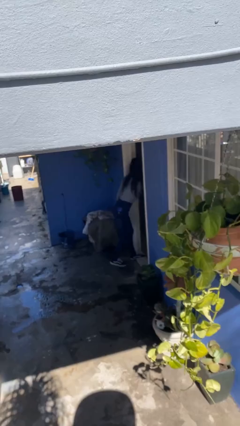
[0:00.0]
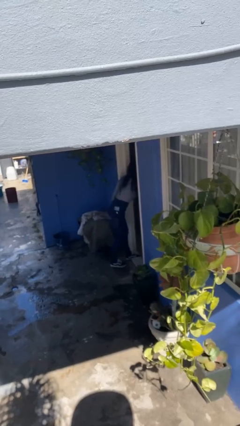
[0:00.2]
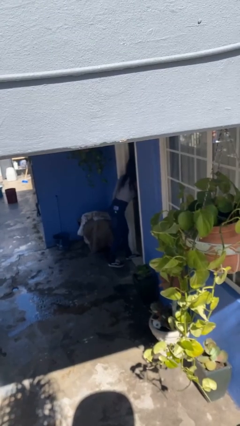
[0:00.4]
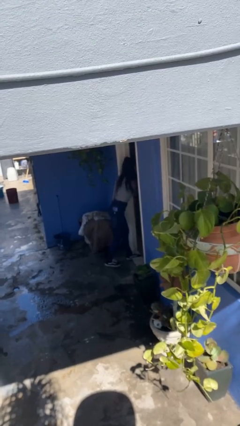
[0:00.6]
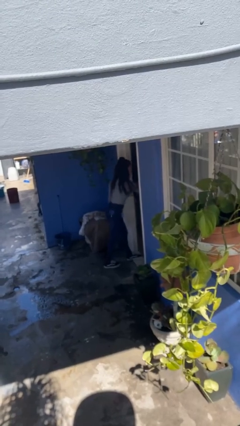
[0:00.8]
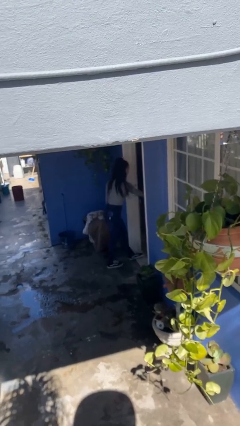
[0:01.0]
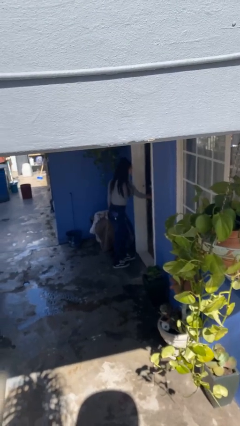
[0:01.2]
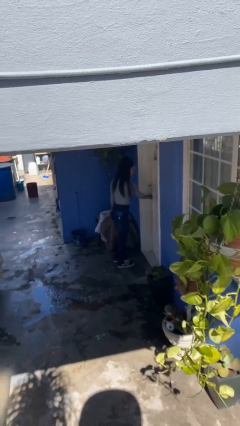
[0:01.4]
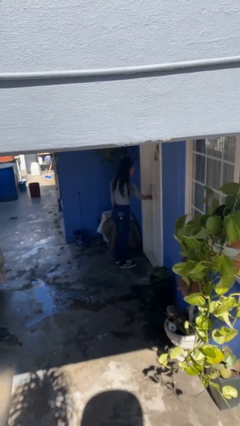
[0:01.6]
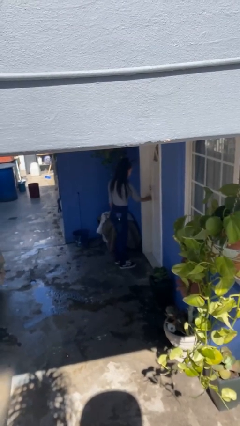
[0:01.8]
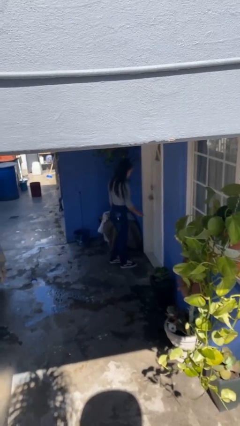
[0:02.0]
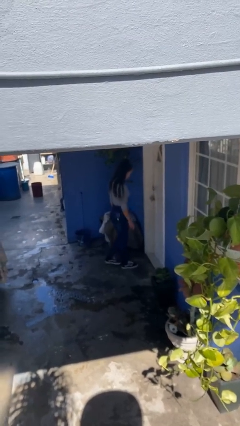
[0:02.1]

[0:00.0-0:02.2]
person closes facility door

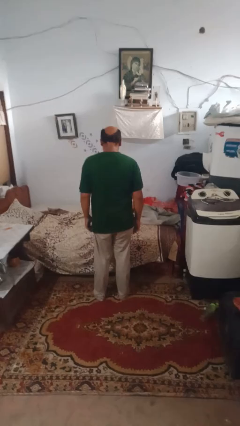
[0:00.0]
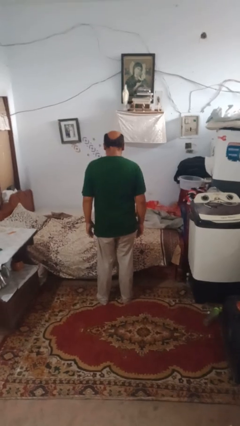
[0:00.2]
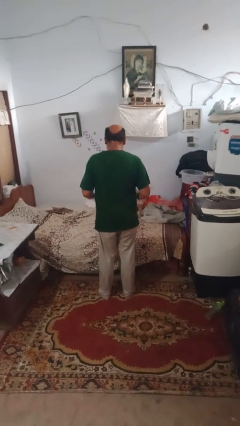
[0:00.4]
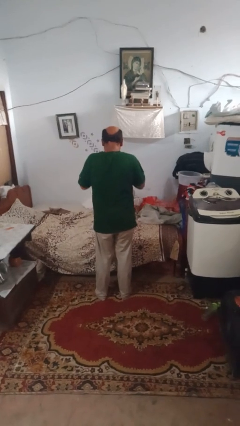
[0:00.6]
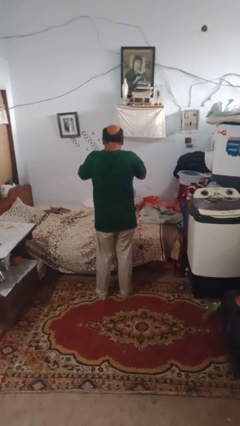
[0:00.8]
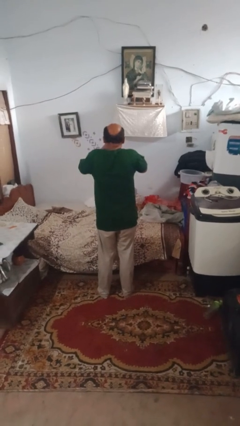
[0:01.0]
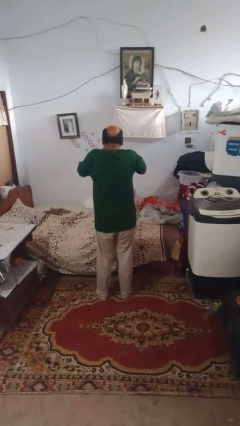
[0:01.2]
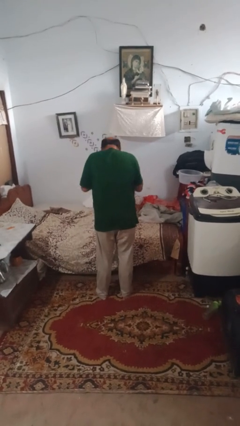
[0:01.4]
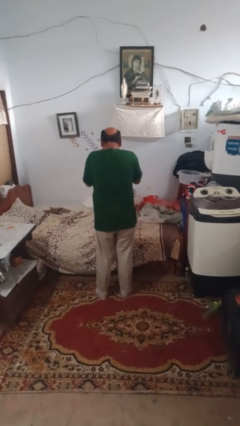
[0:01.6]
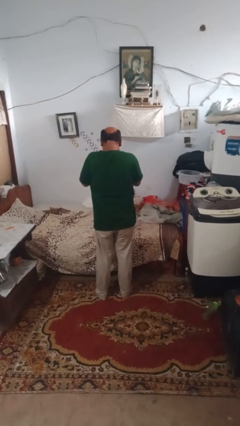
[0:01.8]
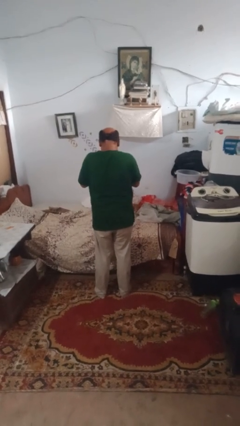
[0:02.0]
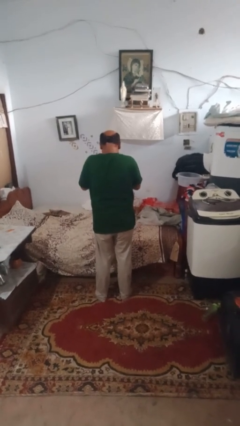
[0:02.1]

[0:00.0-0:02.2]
person sneezes into hand

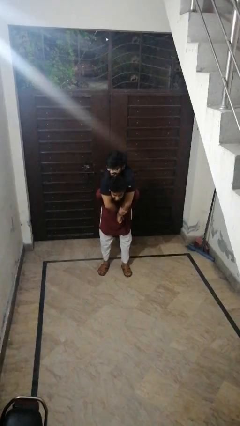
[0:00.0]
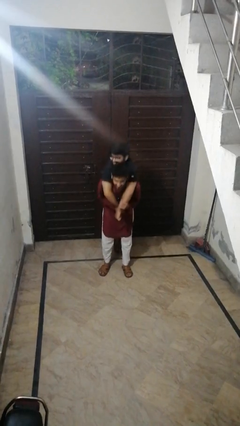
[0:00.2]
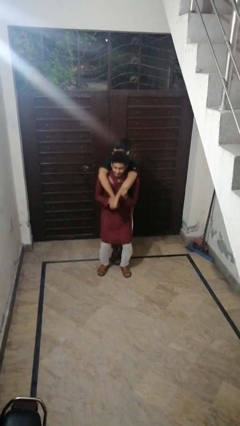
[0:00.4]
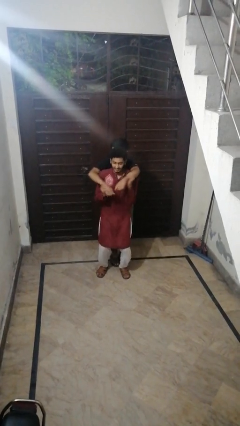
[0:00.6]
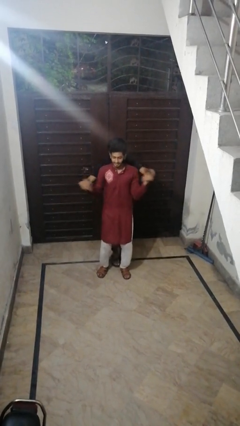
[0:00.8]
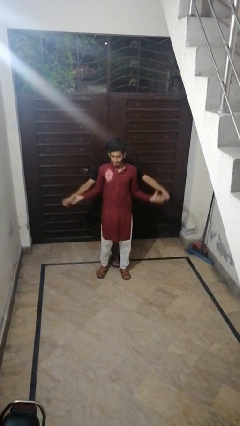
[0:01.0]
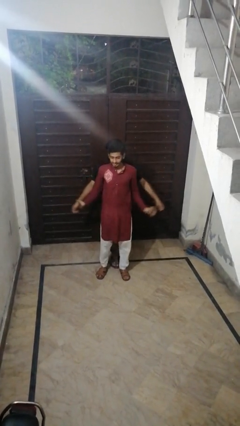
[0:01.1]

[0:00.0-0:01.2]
person puts down person

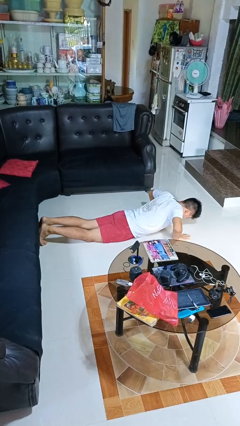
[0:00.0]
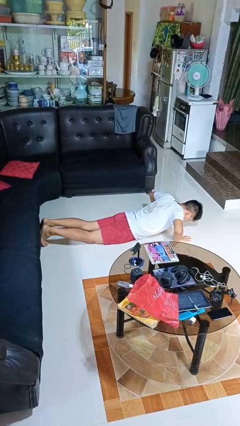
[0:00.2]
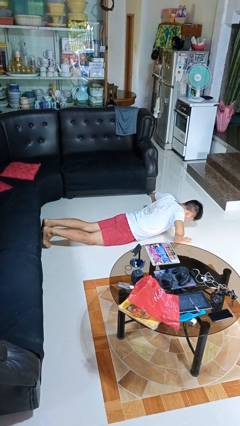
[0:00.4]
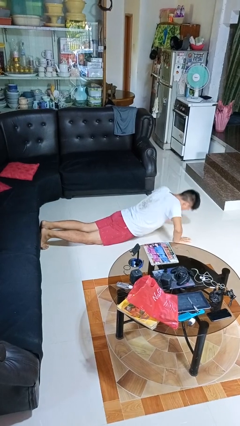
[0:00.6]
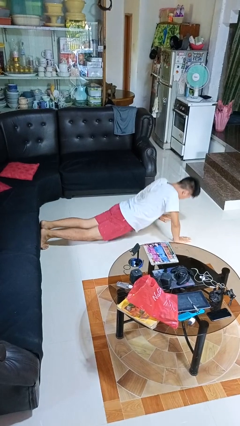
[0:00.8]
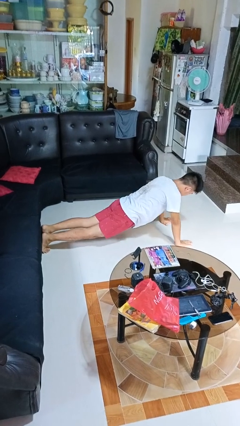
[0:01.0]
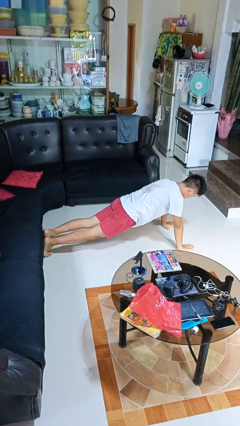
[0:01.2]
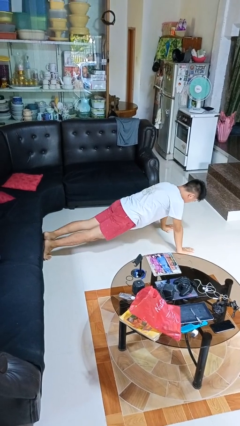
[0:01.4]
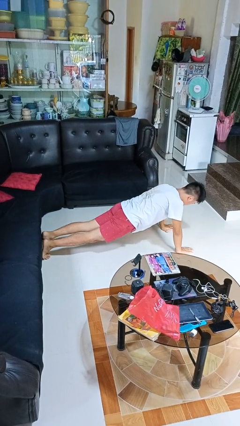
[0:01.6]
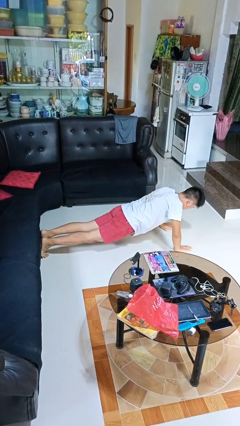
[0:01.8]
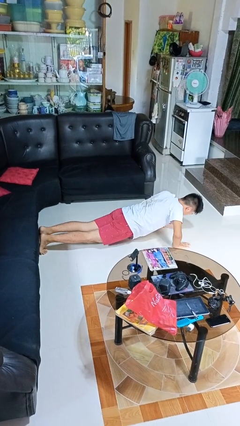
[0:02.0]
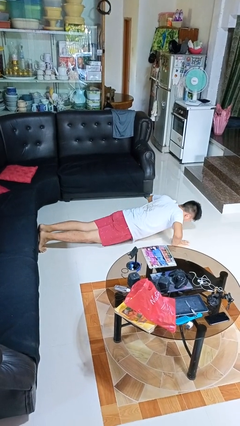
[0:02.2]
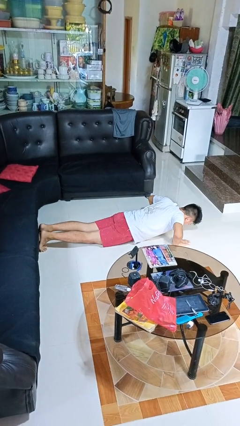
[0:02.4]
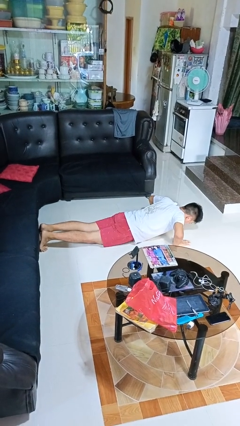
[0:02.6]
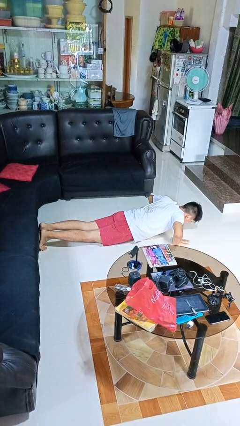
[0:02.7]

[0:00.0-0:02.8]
person exercises with pushup

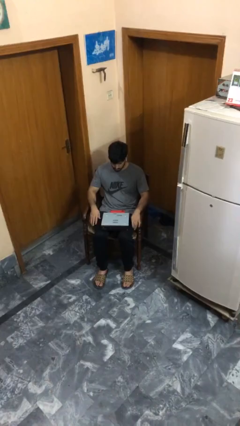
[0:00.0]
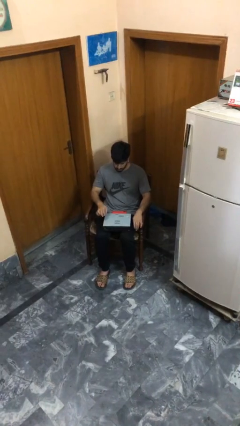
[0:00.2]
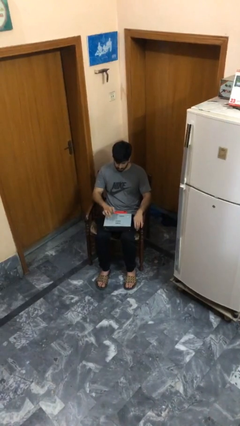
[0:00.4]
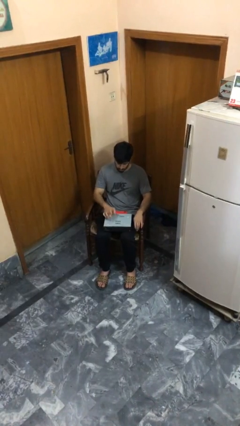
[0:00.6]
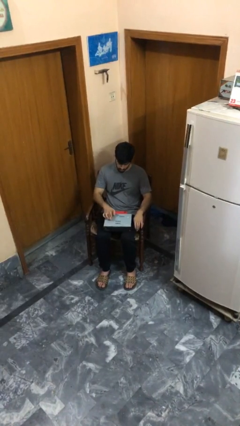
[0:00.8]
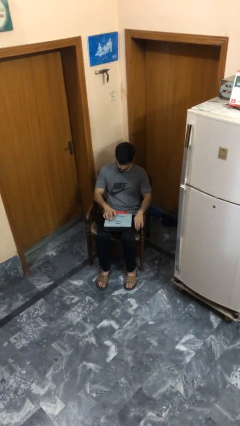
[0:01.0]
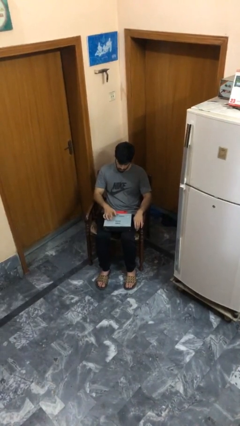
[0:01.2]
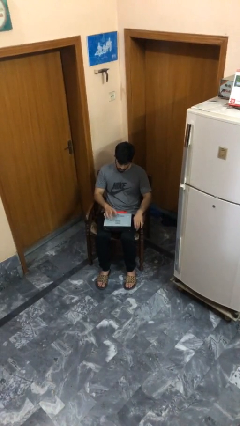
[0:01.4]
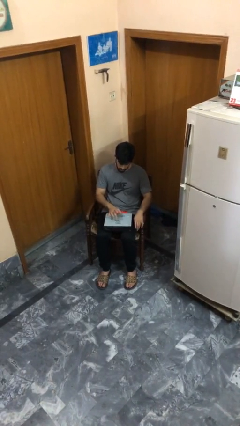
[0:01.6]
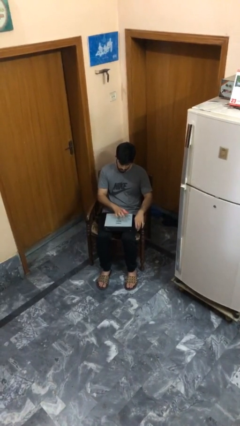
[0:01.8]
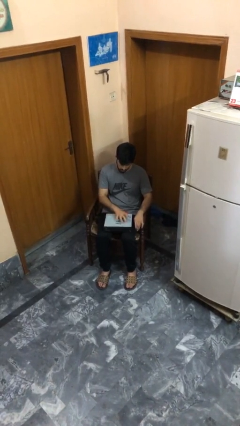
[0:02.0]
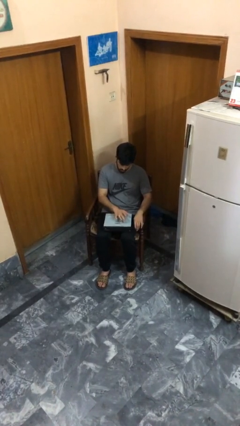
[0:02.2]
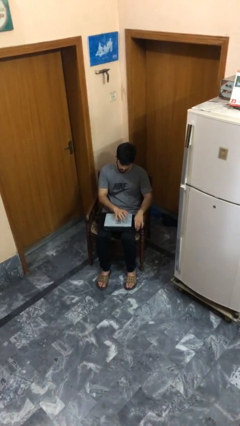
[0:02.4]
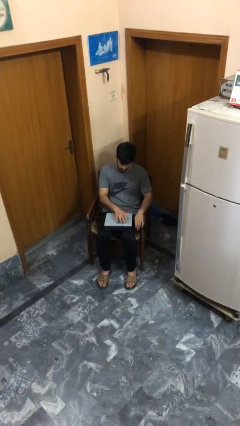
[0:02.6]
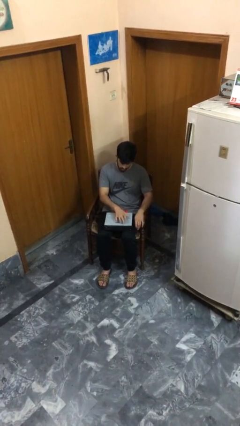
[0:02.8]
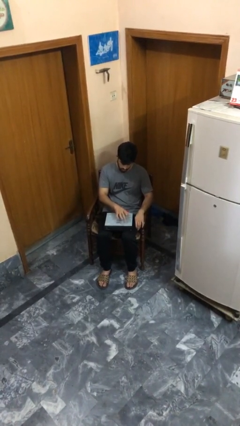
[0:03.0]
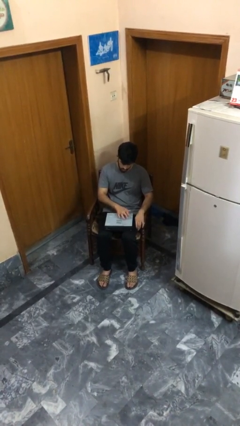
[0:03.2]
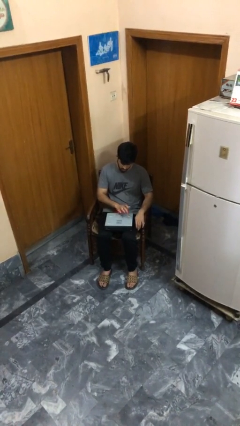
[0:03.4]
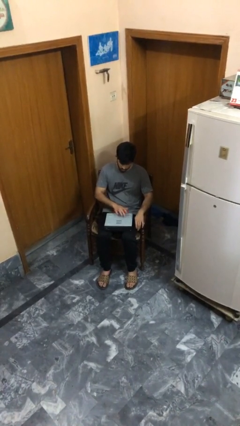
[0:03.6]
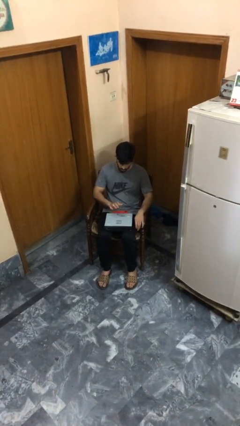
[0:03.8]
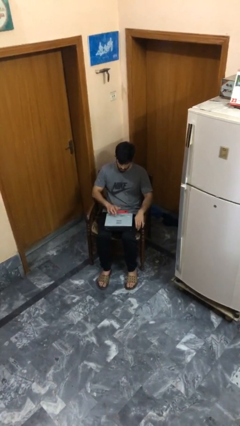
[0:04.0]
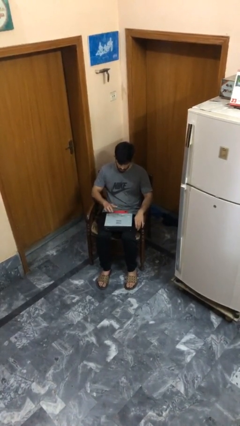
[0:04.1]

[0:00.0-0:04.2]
person taps object with finger

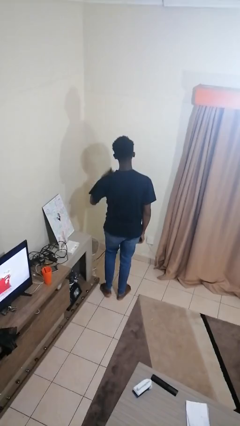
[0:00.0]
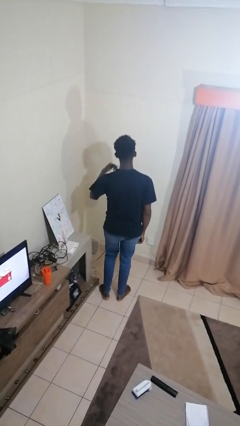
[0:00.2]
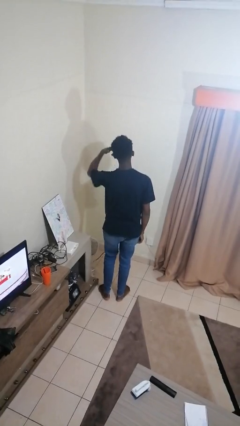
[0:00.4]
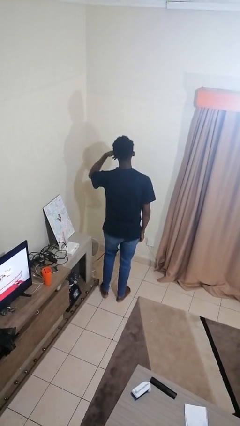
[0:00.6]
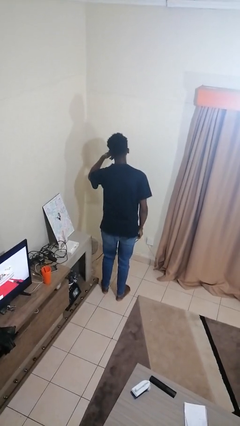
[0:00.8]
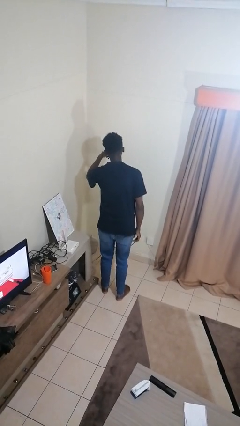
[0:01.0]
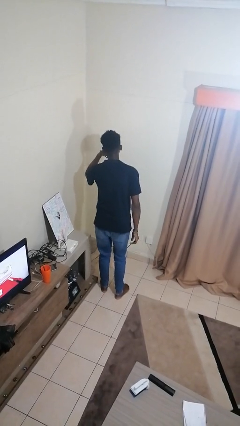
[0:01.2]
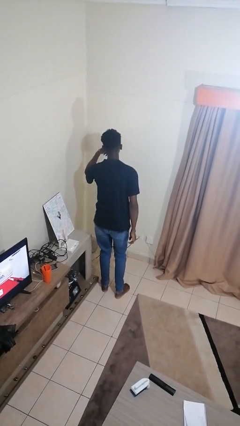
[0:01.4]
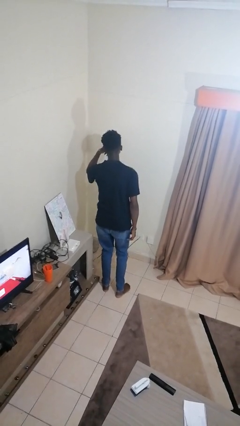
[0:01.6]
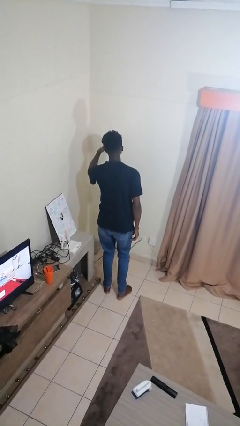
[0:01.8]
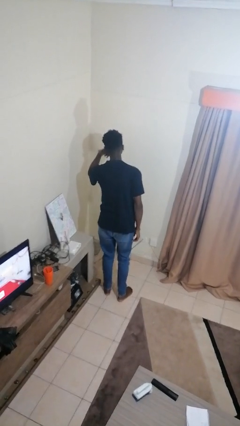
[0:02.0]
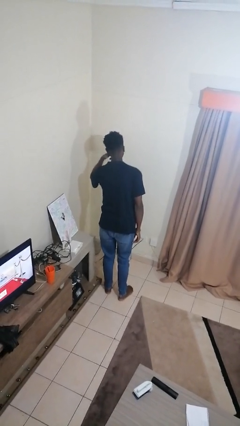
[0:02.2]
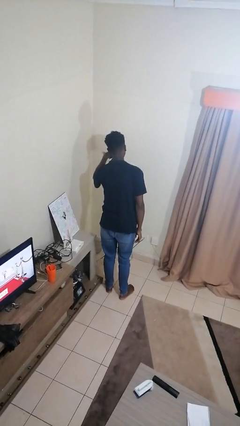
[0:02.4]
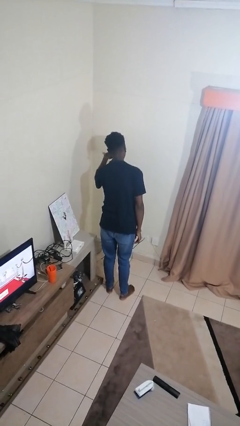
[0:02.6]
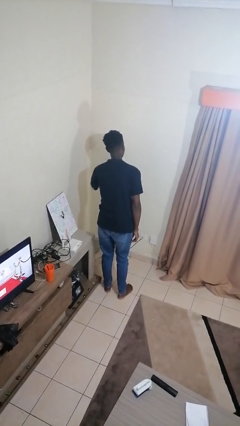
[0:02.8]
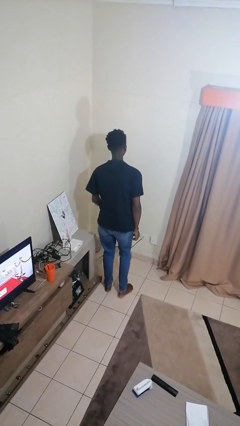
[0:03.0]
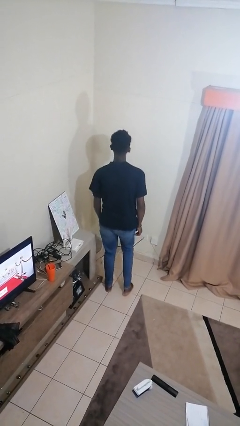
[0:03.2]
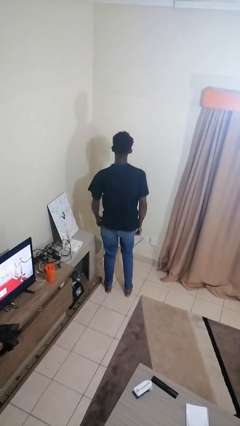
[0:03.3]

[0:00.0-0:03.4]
person gestures call me

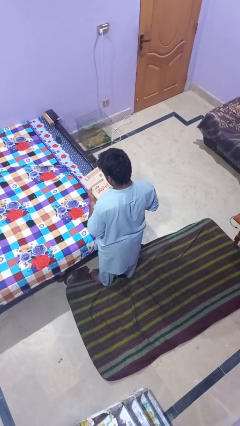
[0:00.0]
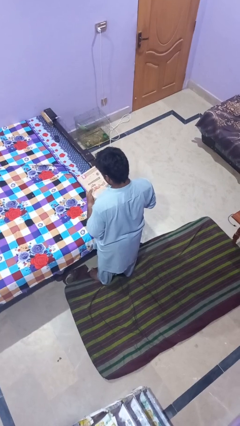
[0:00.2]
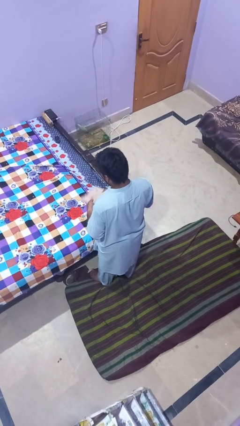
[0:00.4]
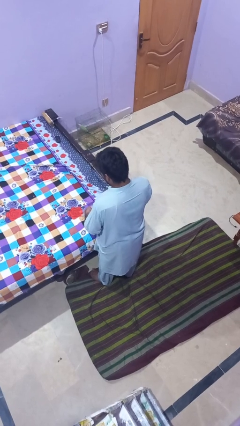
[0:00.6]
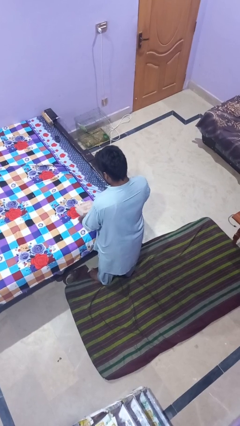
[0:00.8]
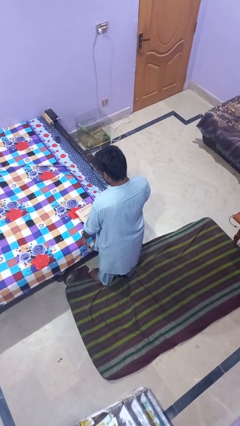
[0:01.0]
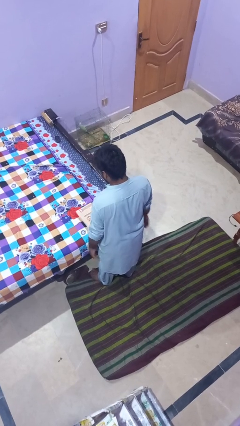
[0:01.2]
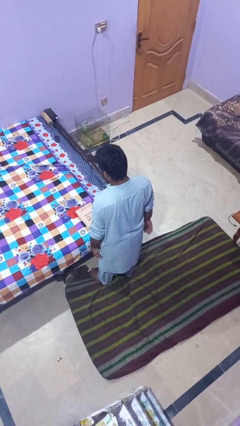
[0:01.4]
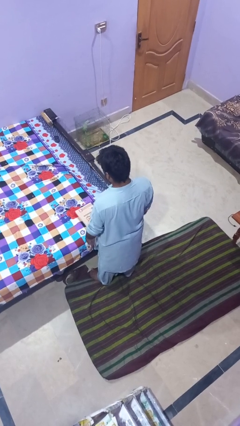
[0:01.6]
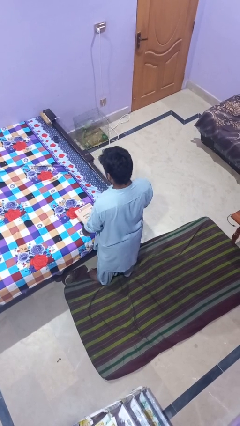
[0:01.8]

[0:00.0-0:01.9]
person puts down object on bed
